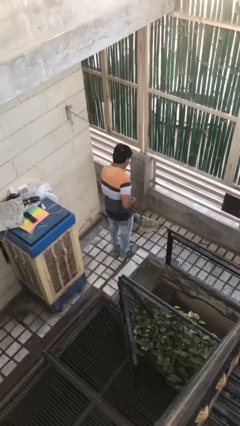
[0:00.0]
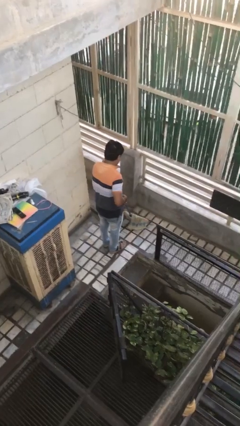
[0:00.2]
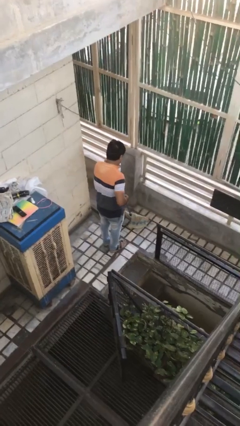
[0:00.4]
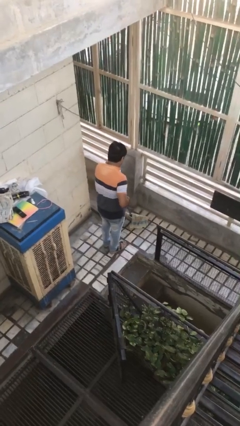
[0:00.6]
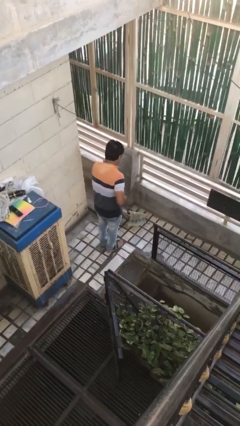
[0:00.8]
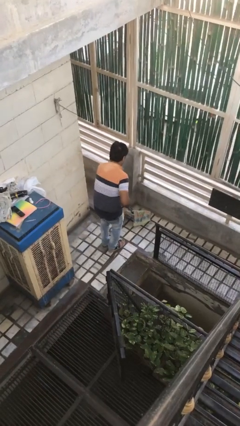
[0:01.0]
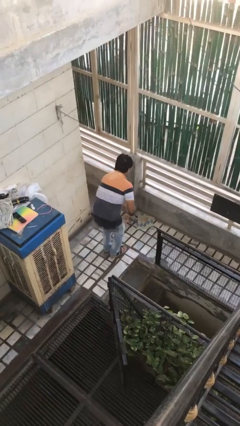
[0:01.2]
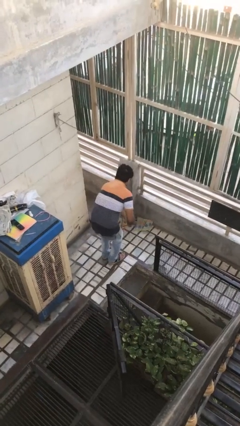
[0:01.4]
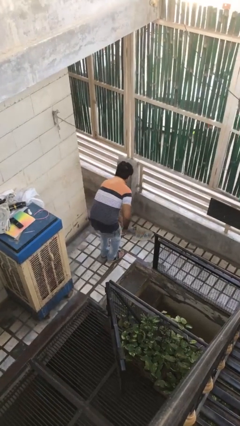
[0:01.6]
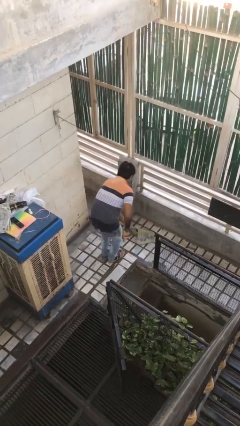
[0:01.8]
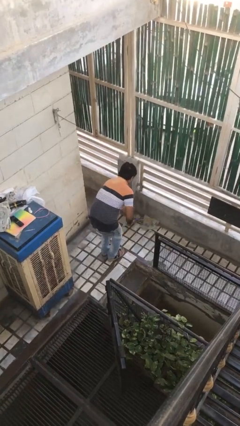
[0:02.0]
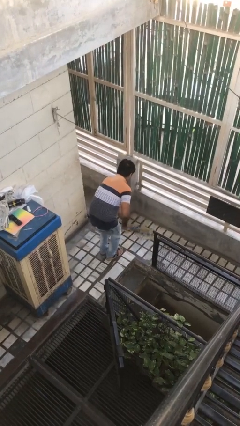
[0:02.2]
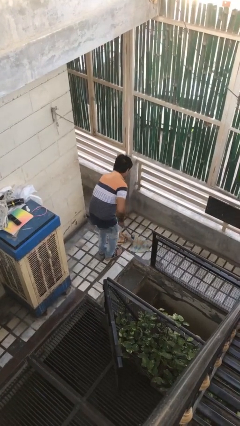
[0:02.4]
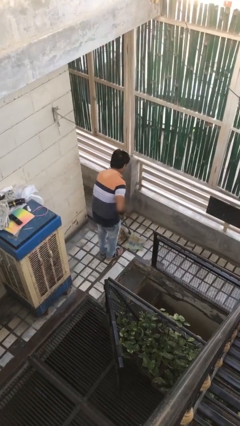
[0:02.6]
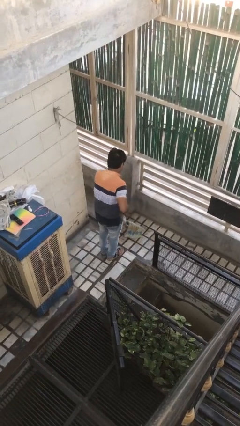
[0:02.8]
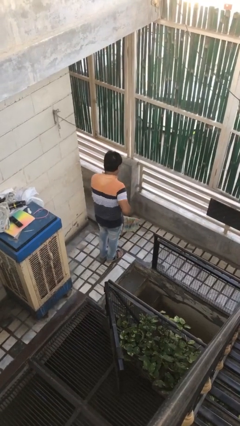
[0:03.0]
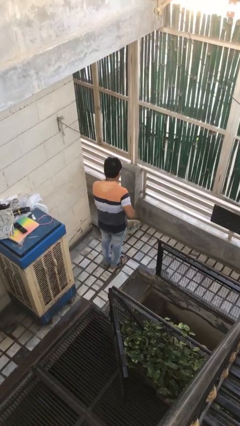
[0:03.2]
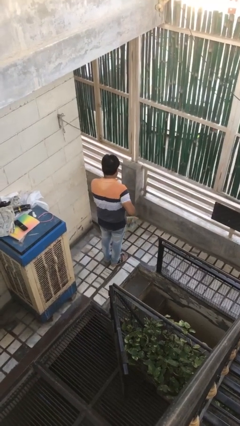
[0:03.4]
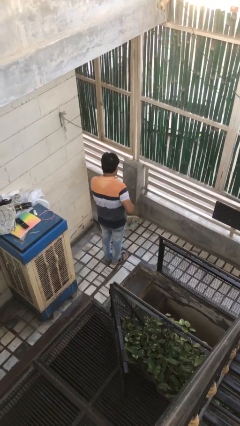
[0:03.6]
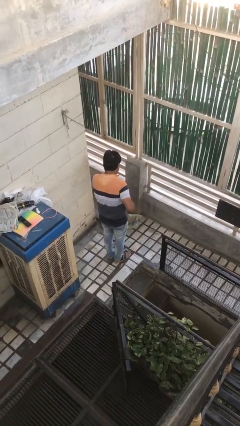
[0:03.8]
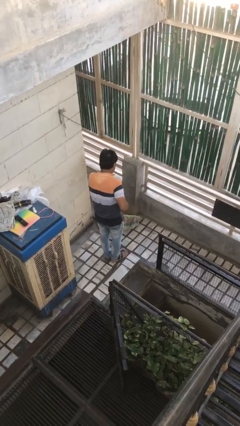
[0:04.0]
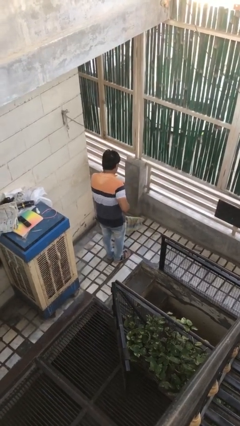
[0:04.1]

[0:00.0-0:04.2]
person mops

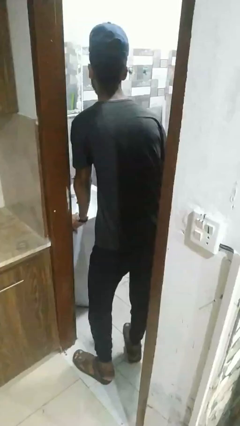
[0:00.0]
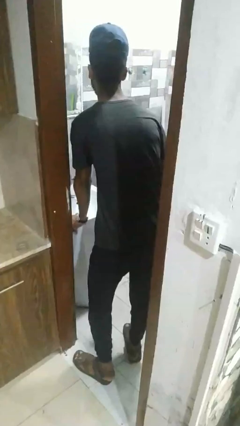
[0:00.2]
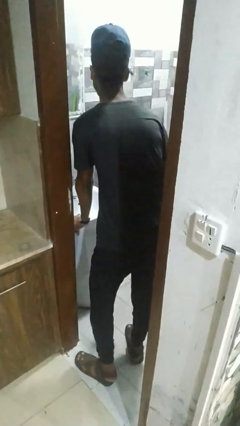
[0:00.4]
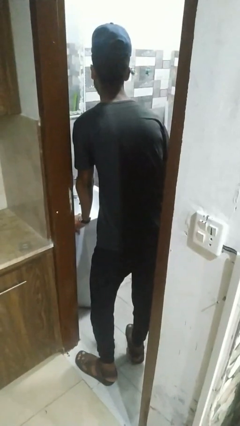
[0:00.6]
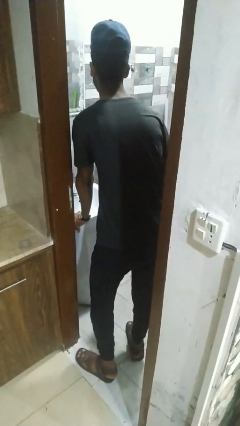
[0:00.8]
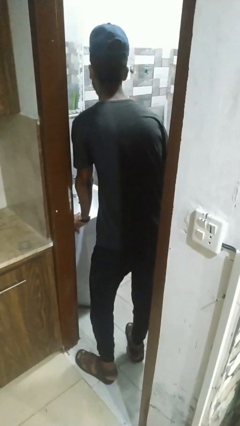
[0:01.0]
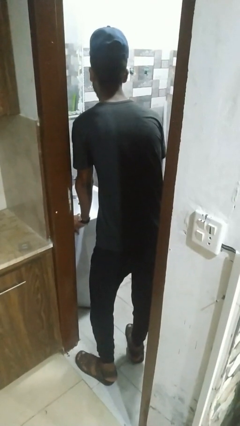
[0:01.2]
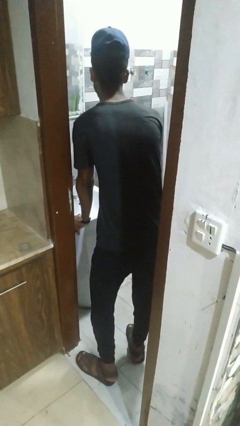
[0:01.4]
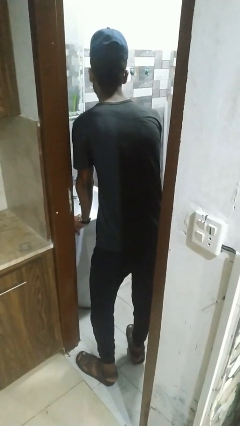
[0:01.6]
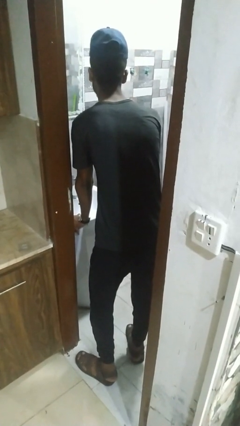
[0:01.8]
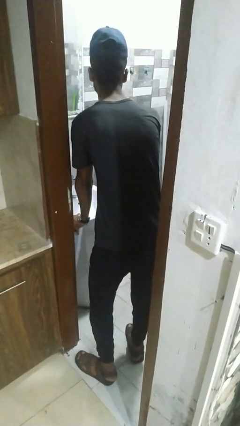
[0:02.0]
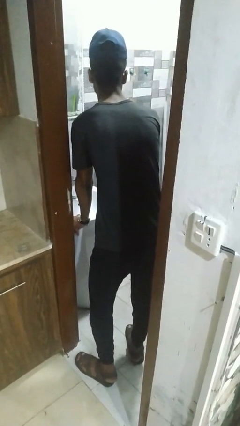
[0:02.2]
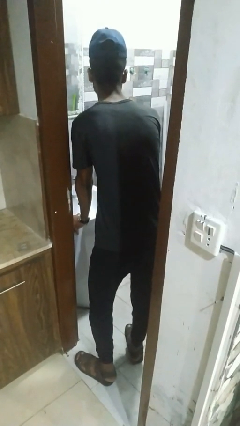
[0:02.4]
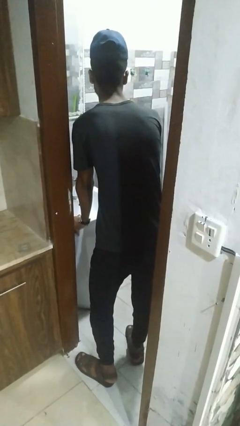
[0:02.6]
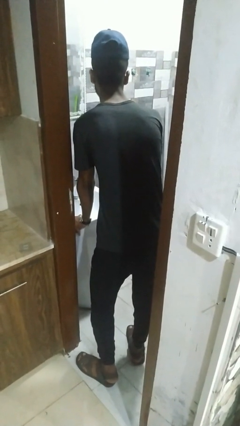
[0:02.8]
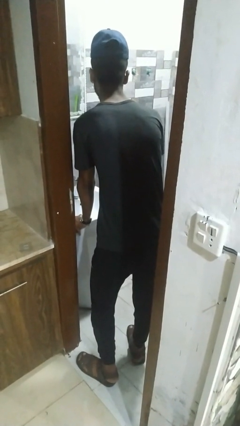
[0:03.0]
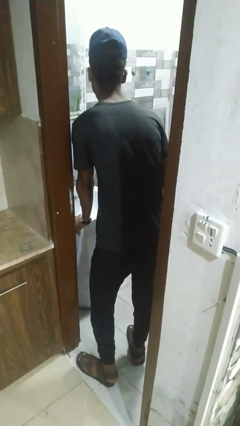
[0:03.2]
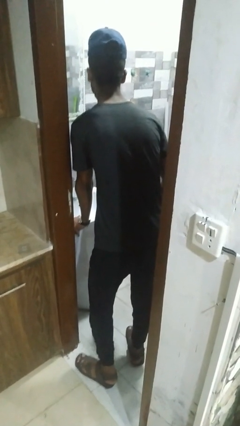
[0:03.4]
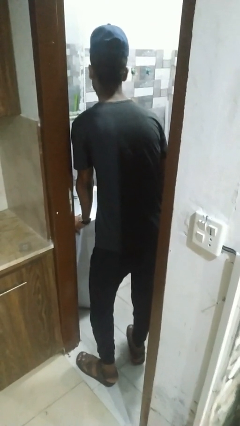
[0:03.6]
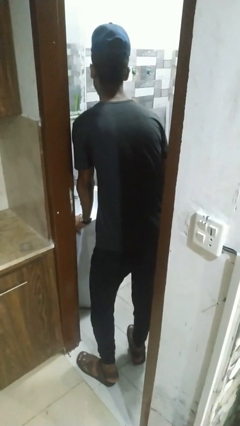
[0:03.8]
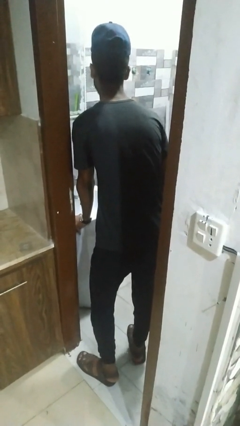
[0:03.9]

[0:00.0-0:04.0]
person flosses

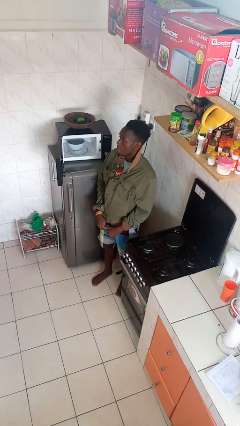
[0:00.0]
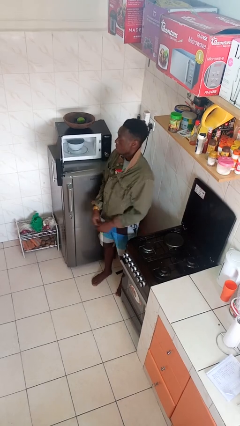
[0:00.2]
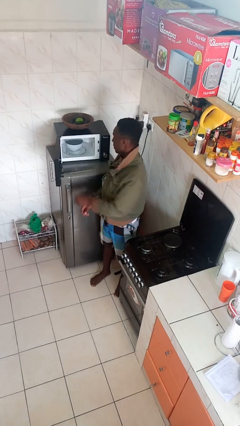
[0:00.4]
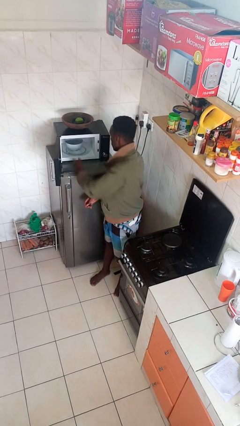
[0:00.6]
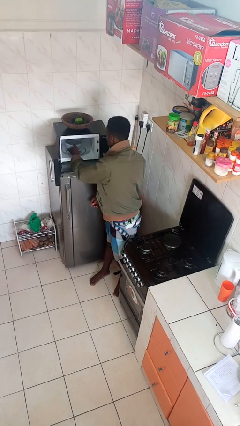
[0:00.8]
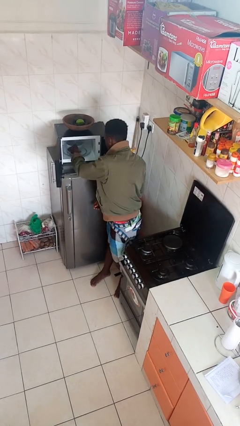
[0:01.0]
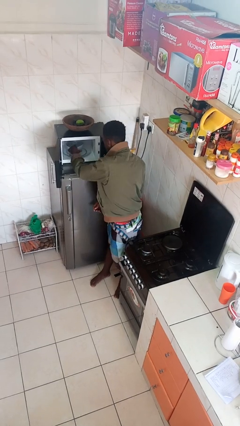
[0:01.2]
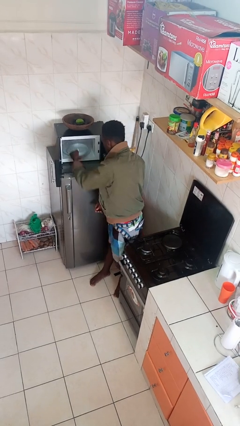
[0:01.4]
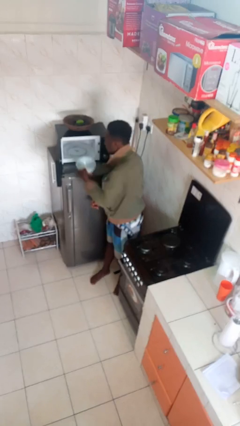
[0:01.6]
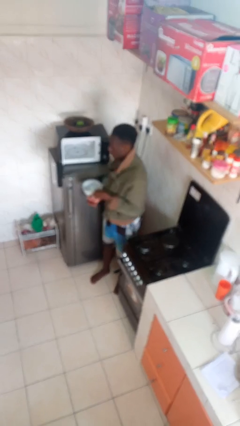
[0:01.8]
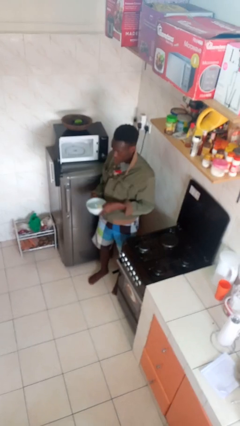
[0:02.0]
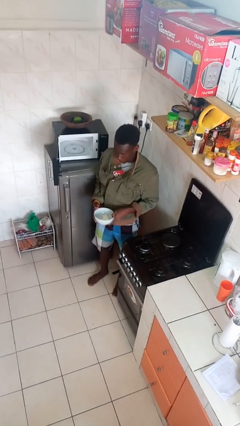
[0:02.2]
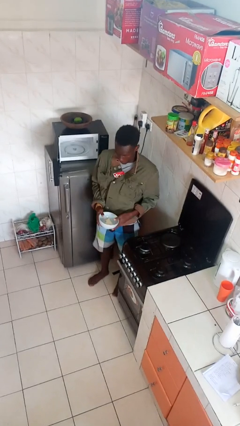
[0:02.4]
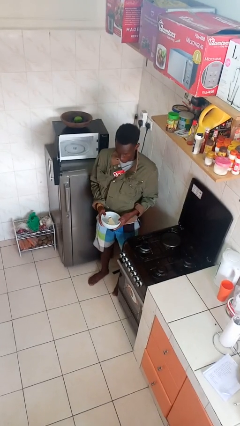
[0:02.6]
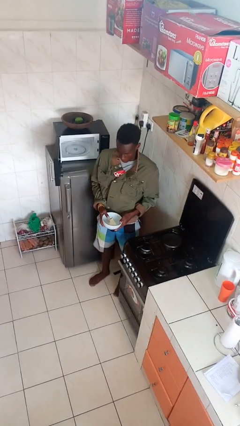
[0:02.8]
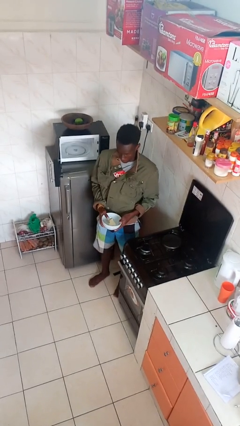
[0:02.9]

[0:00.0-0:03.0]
person takes object from microwave

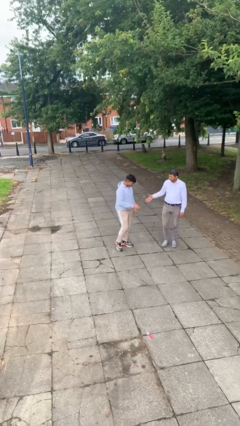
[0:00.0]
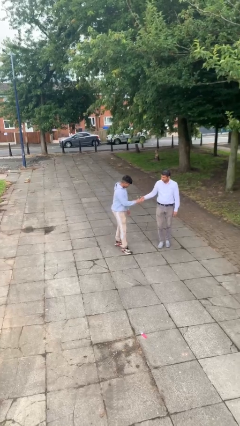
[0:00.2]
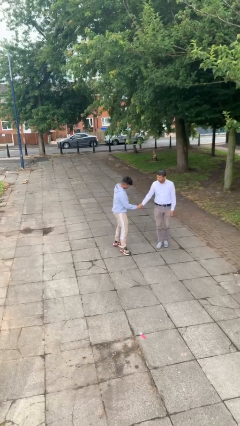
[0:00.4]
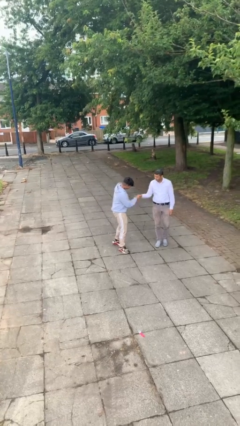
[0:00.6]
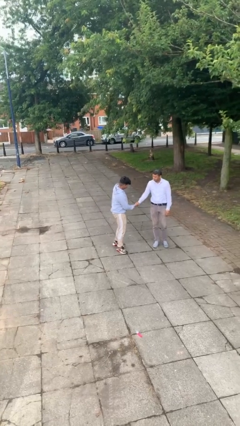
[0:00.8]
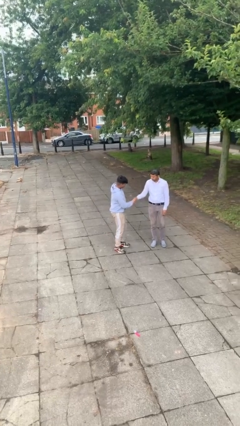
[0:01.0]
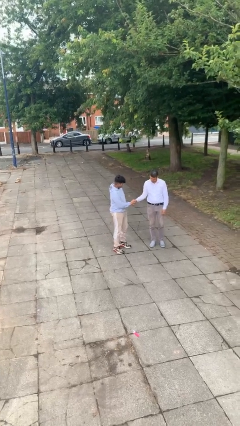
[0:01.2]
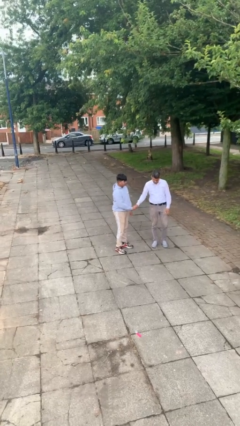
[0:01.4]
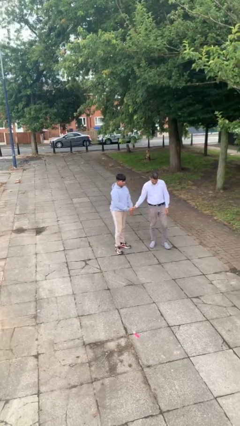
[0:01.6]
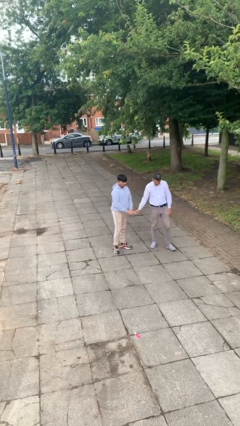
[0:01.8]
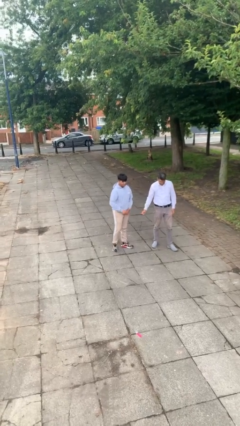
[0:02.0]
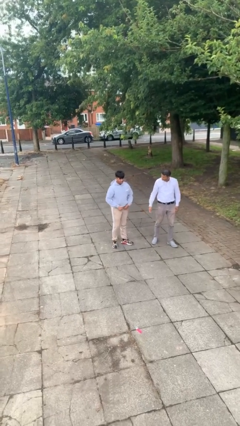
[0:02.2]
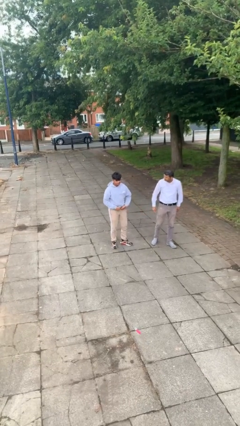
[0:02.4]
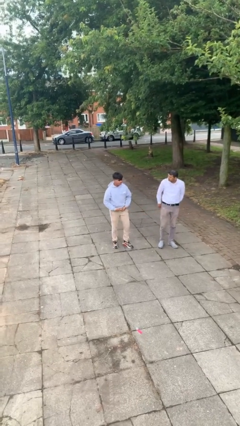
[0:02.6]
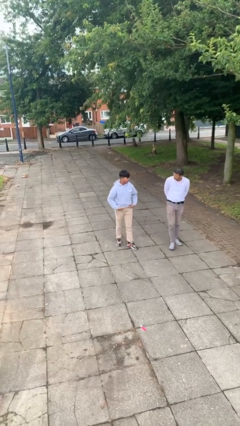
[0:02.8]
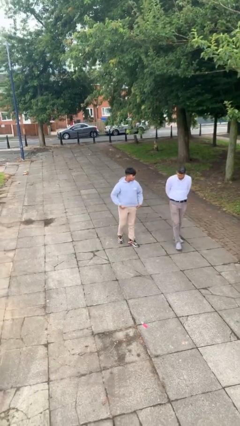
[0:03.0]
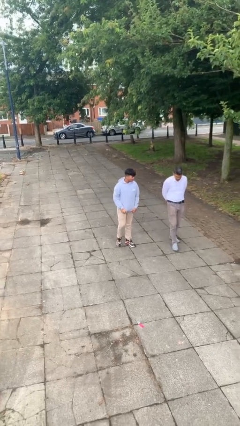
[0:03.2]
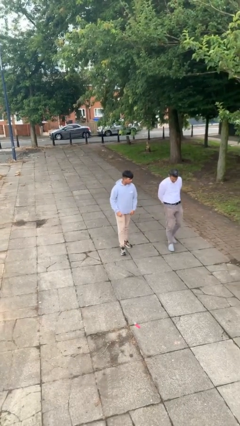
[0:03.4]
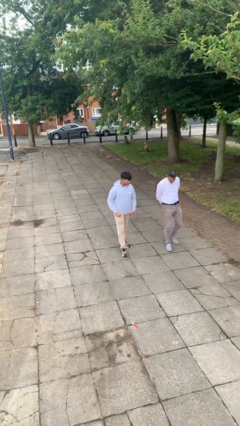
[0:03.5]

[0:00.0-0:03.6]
person shakes hand

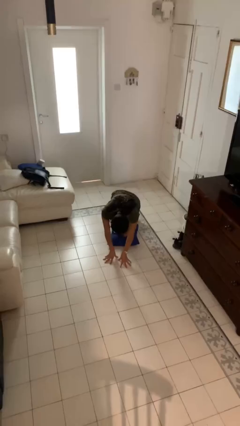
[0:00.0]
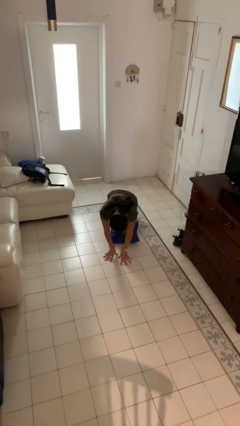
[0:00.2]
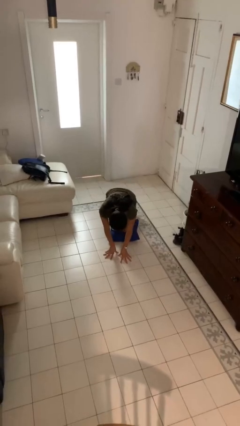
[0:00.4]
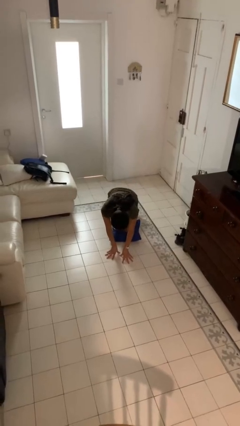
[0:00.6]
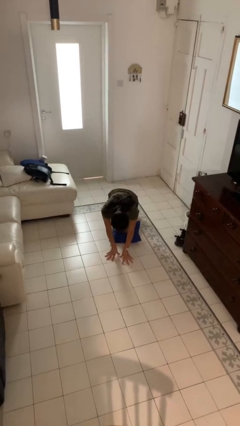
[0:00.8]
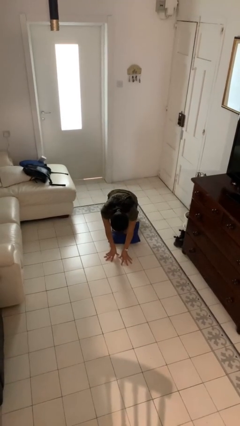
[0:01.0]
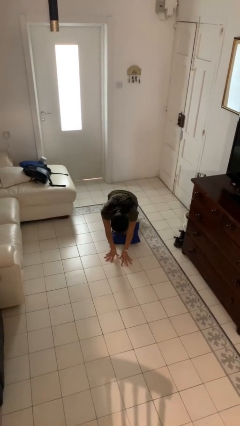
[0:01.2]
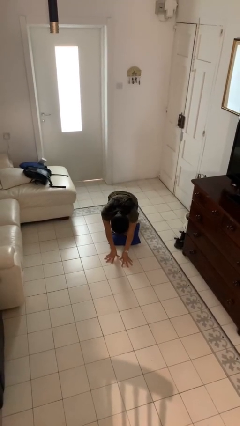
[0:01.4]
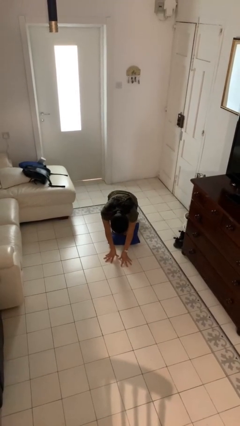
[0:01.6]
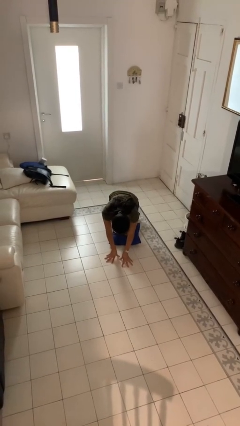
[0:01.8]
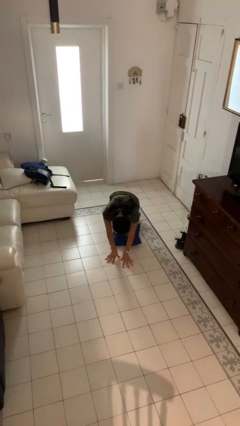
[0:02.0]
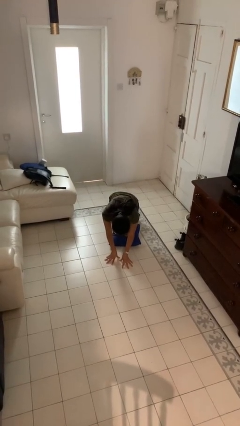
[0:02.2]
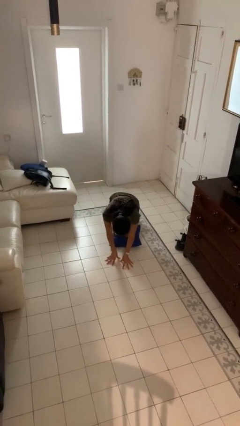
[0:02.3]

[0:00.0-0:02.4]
person lies down on floor
